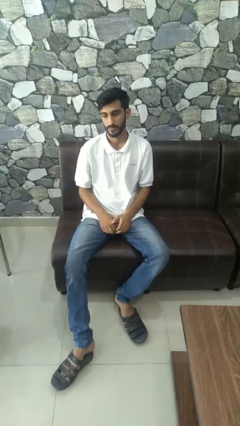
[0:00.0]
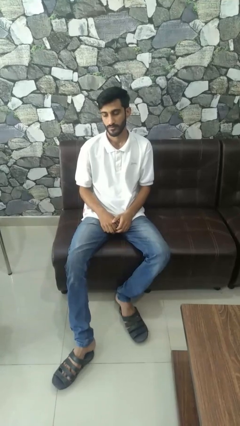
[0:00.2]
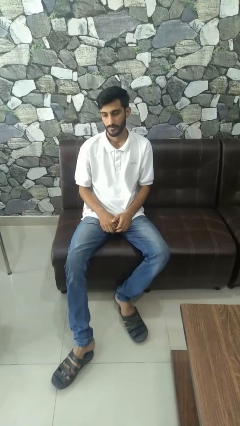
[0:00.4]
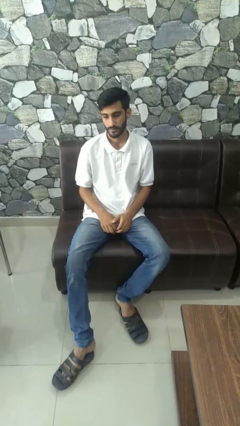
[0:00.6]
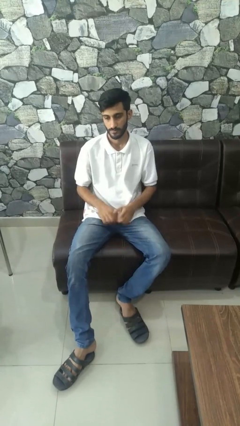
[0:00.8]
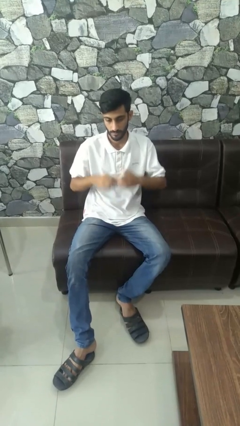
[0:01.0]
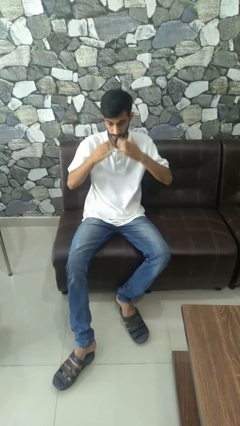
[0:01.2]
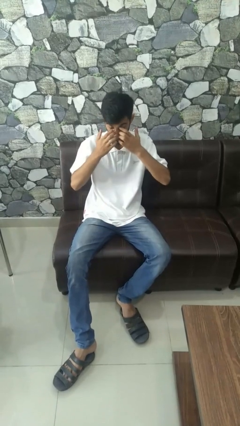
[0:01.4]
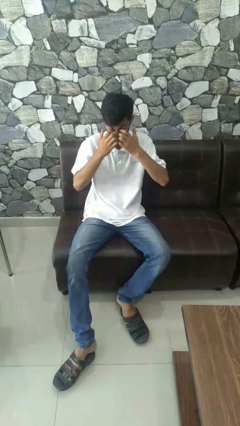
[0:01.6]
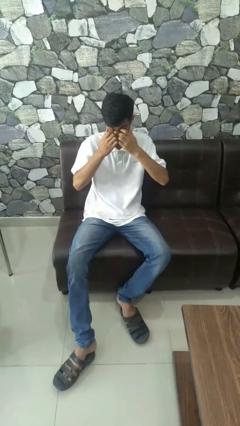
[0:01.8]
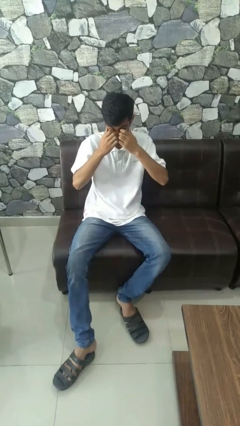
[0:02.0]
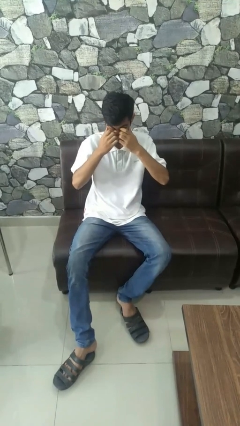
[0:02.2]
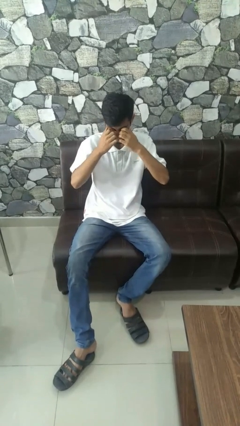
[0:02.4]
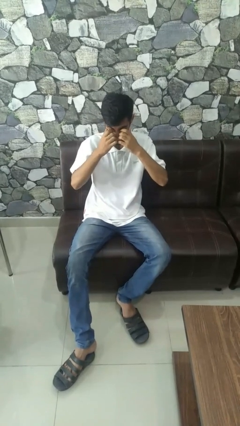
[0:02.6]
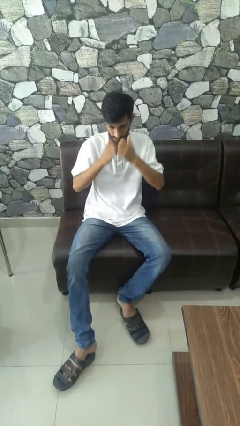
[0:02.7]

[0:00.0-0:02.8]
person rubs eyes

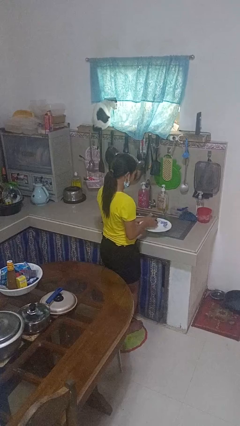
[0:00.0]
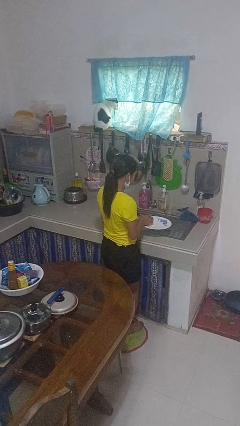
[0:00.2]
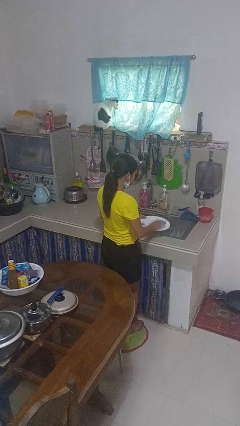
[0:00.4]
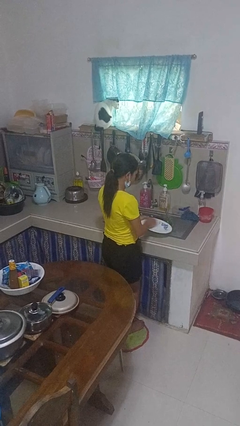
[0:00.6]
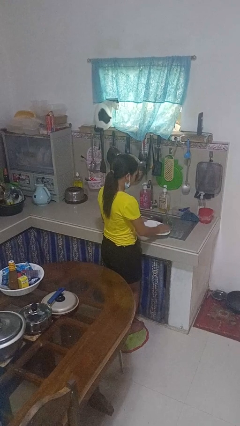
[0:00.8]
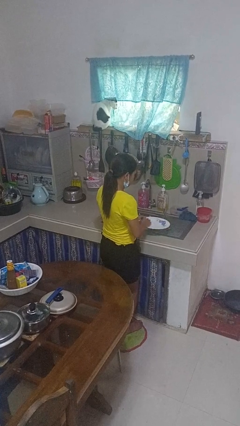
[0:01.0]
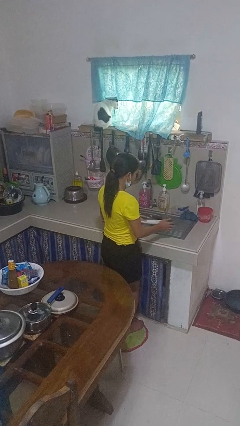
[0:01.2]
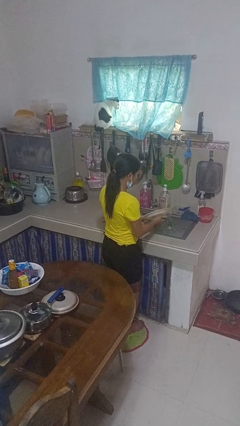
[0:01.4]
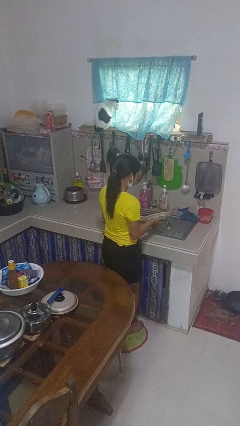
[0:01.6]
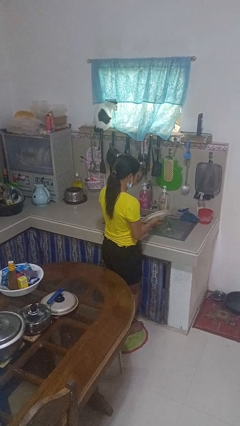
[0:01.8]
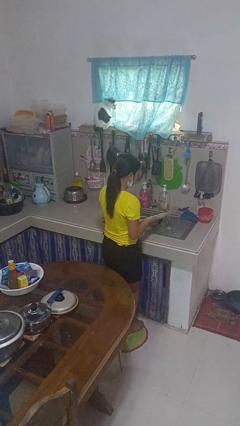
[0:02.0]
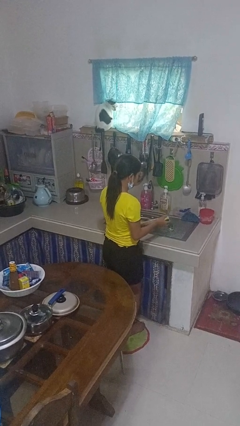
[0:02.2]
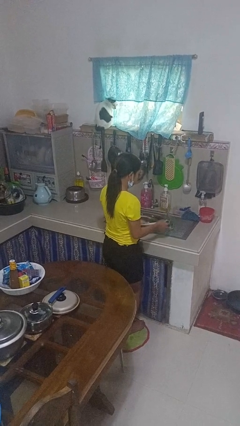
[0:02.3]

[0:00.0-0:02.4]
person washes dish

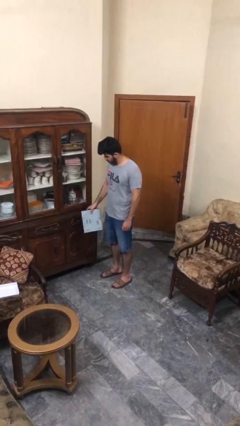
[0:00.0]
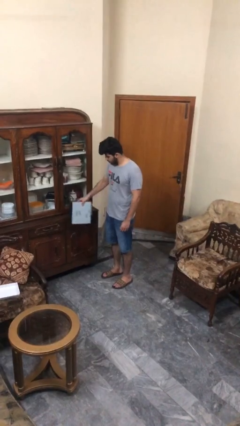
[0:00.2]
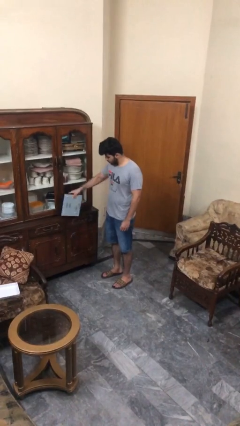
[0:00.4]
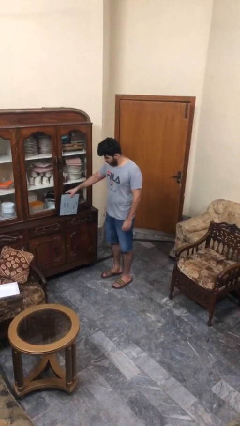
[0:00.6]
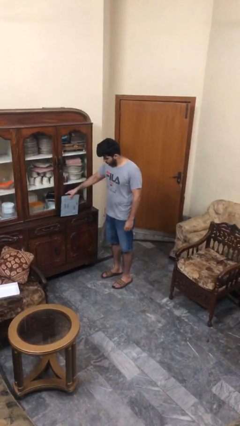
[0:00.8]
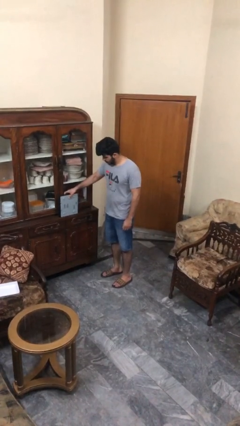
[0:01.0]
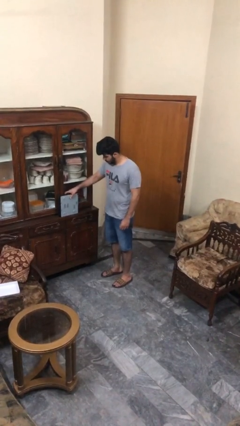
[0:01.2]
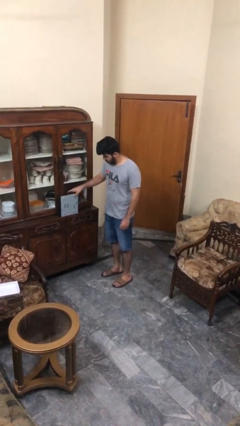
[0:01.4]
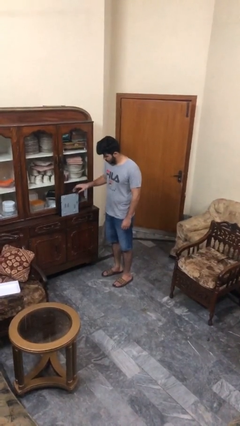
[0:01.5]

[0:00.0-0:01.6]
person puts down object on countertop

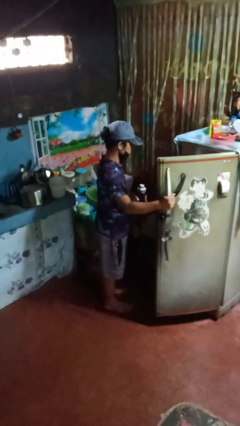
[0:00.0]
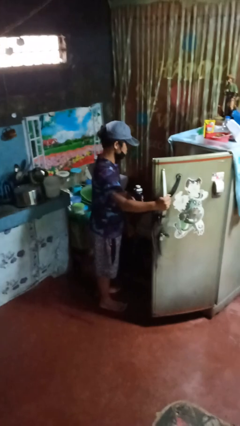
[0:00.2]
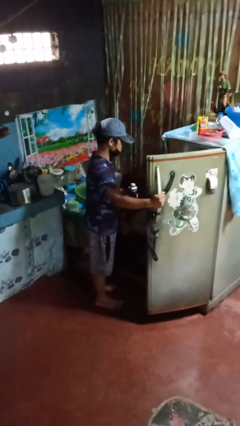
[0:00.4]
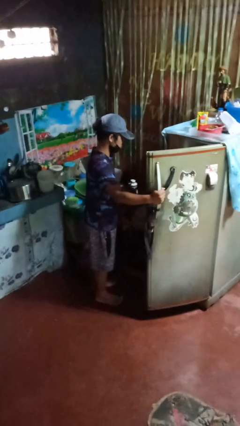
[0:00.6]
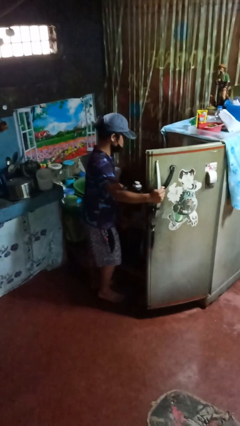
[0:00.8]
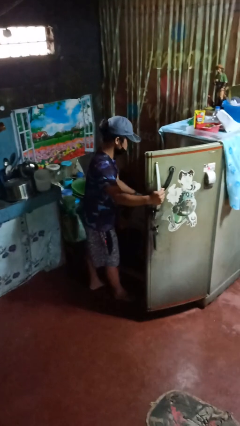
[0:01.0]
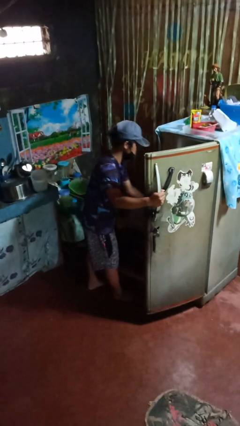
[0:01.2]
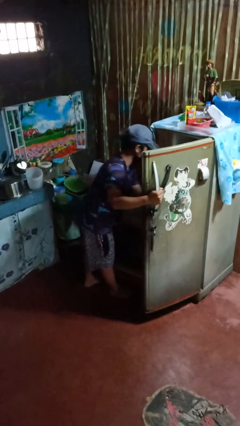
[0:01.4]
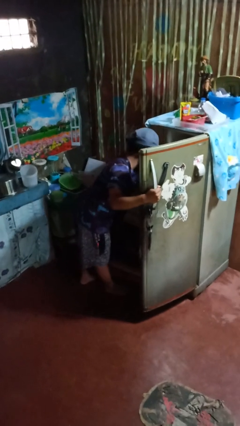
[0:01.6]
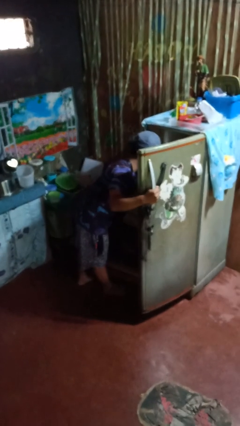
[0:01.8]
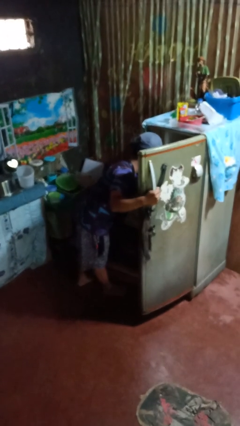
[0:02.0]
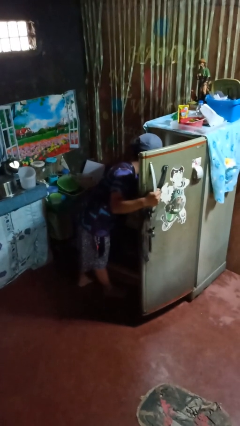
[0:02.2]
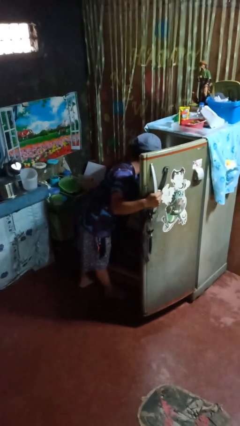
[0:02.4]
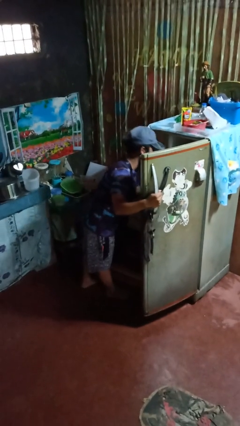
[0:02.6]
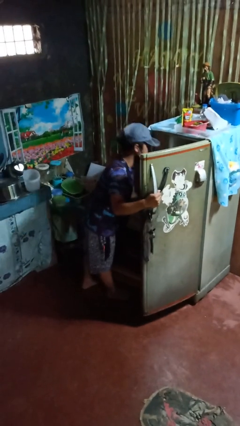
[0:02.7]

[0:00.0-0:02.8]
person puts object into refrigerator

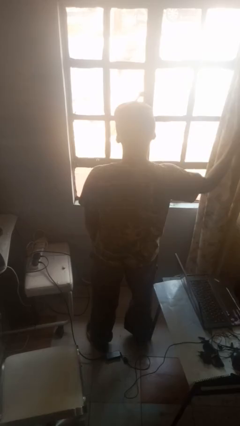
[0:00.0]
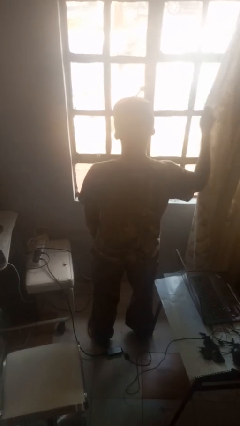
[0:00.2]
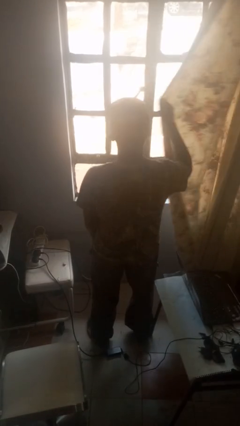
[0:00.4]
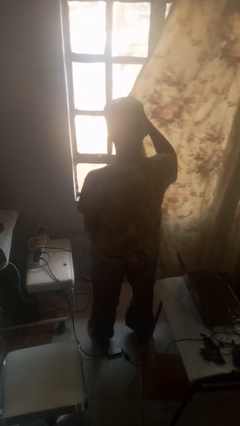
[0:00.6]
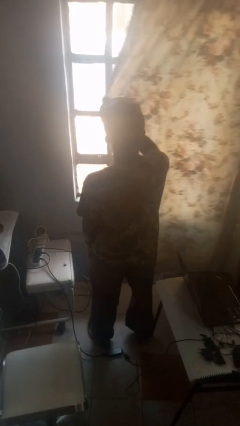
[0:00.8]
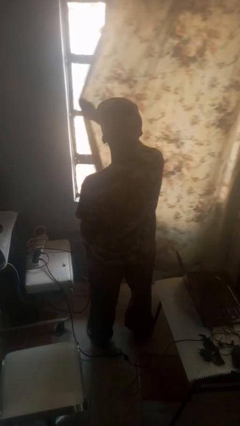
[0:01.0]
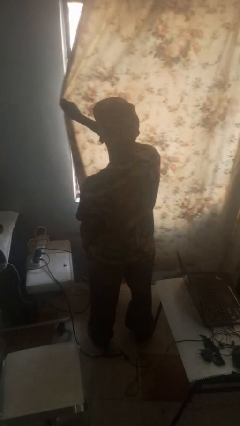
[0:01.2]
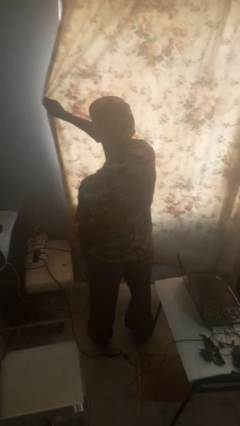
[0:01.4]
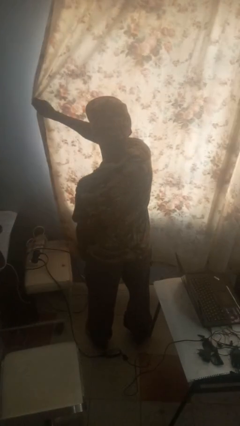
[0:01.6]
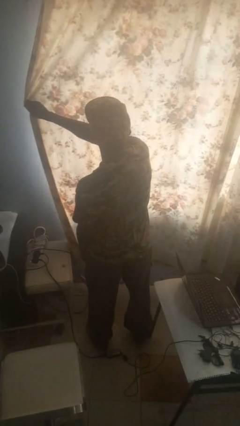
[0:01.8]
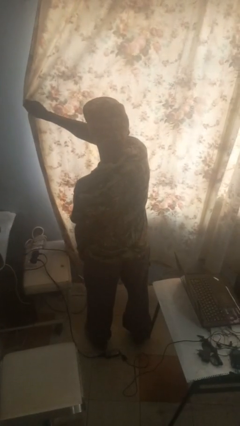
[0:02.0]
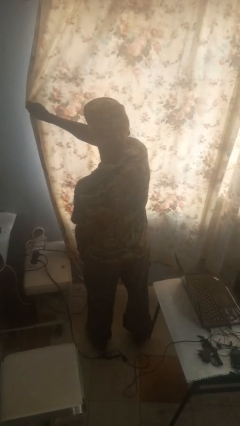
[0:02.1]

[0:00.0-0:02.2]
person closes curtains

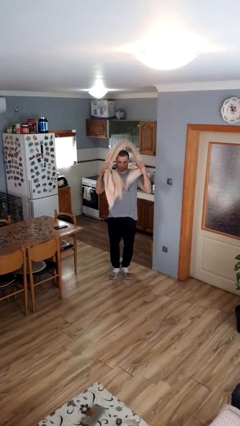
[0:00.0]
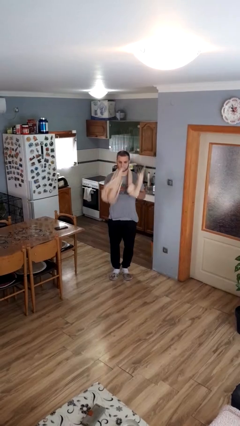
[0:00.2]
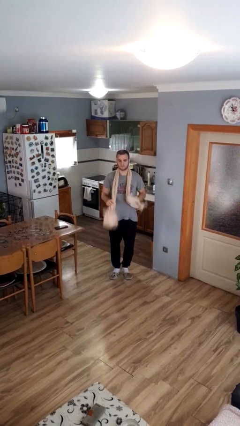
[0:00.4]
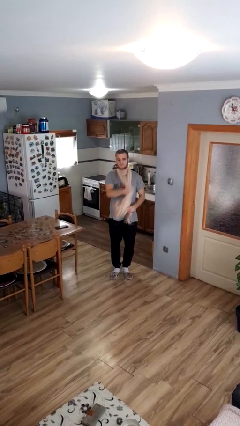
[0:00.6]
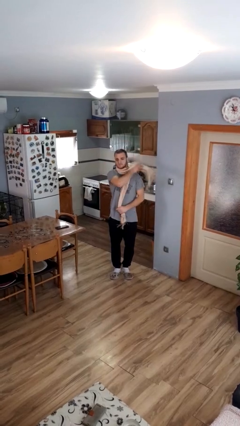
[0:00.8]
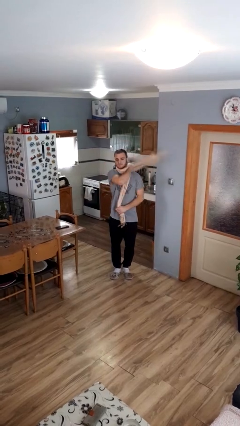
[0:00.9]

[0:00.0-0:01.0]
person puts on scarf

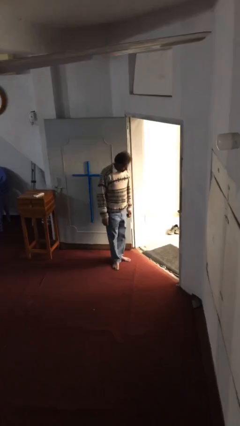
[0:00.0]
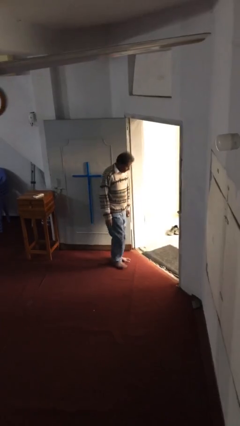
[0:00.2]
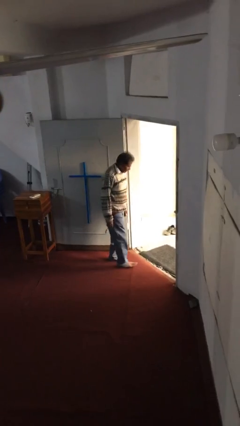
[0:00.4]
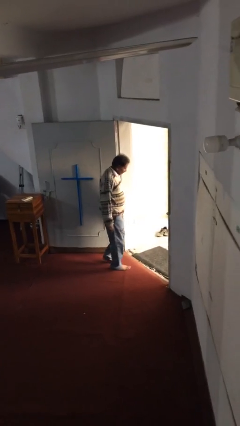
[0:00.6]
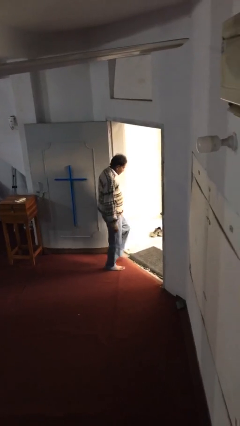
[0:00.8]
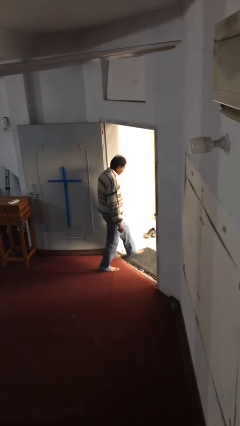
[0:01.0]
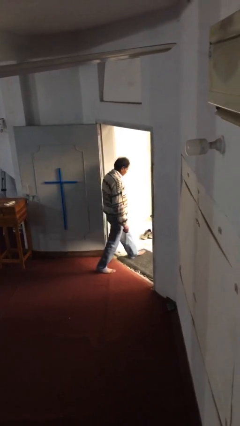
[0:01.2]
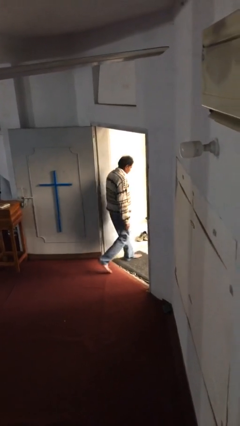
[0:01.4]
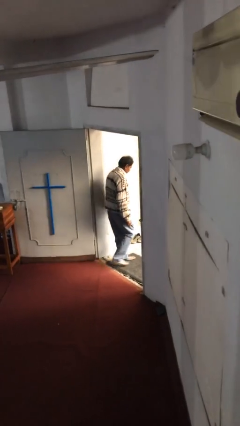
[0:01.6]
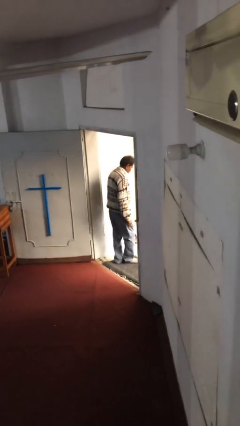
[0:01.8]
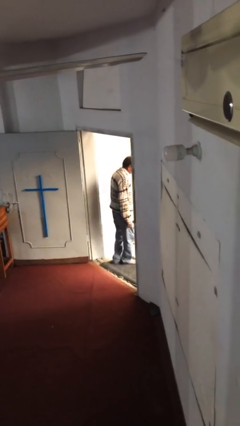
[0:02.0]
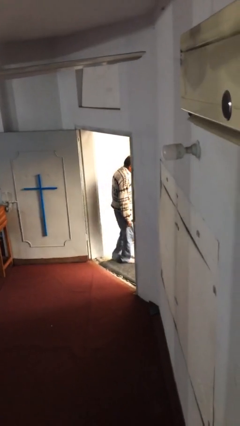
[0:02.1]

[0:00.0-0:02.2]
person exits scene through structure

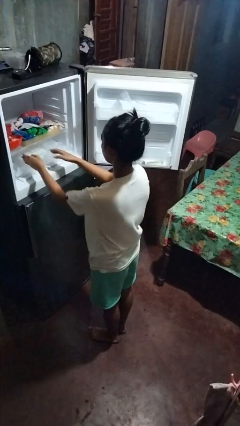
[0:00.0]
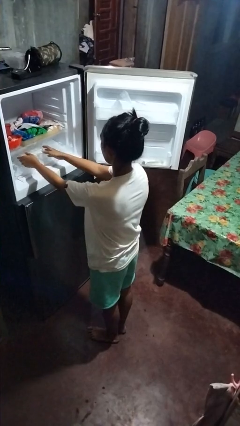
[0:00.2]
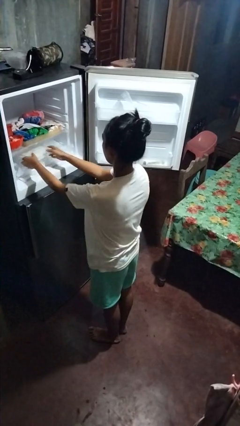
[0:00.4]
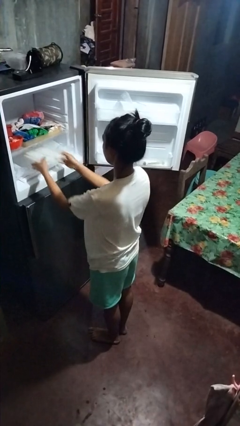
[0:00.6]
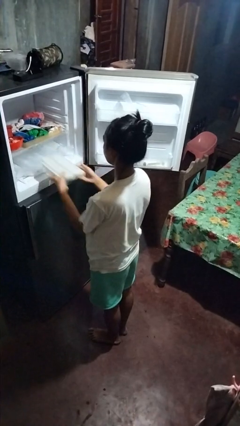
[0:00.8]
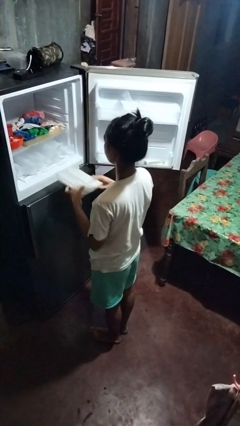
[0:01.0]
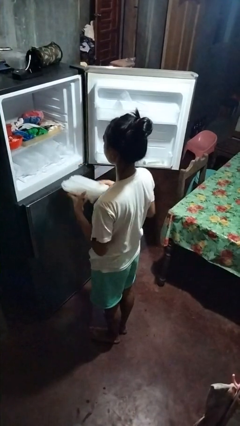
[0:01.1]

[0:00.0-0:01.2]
person takes object from refrigerator

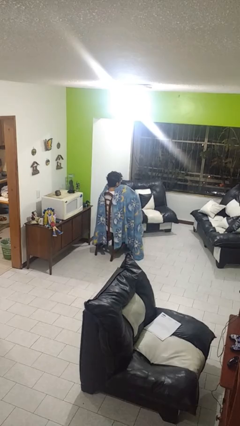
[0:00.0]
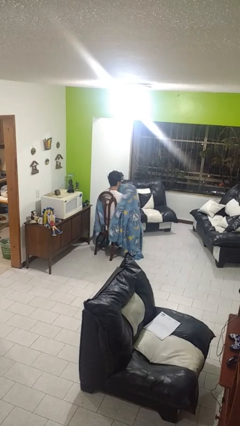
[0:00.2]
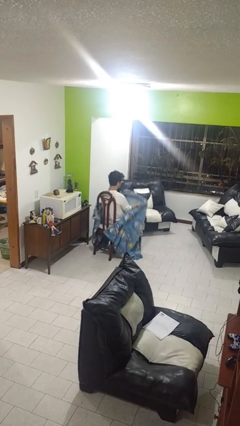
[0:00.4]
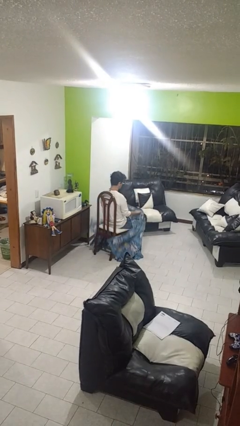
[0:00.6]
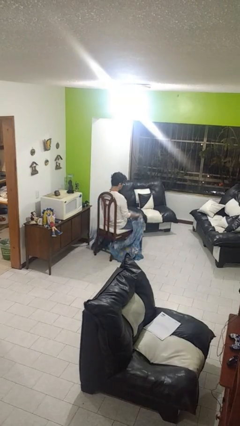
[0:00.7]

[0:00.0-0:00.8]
person uncovers with blanket
